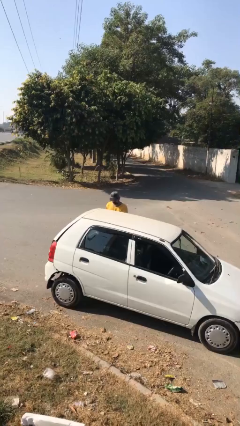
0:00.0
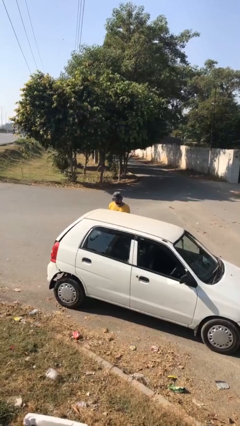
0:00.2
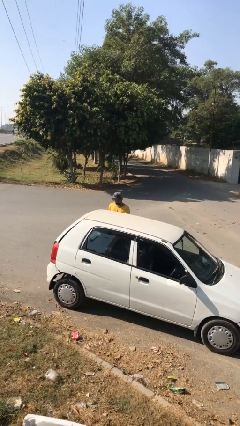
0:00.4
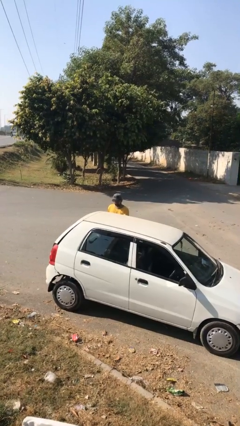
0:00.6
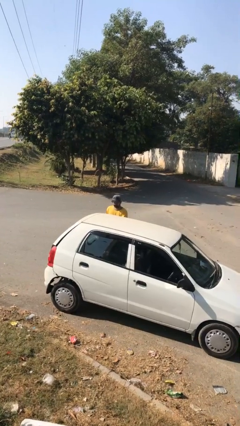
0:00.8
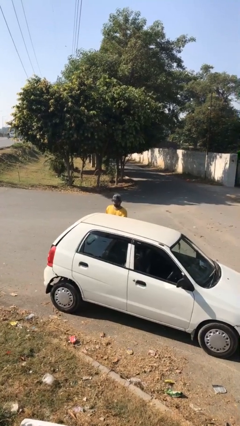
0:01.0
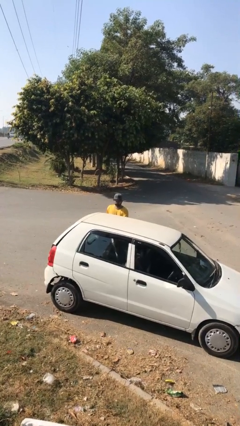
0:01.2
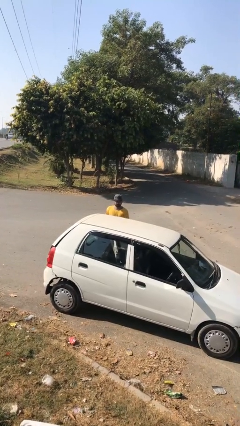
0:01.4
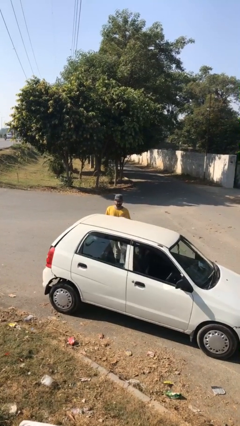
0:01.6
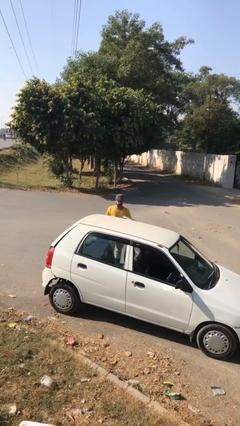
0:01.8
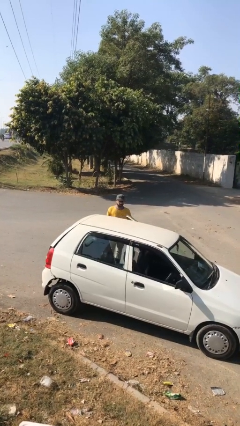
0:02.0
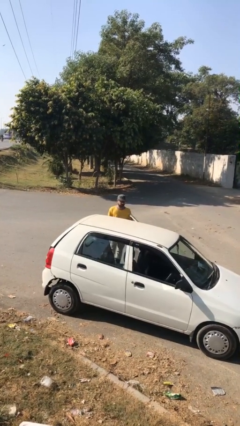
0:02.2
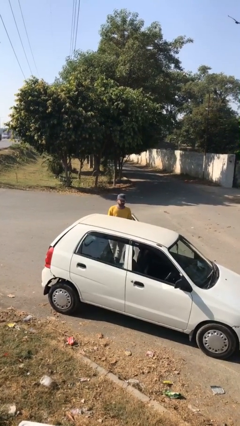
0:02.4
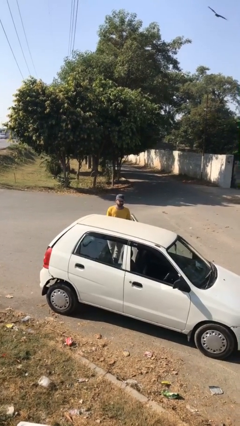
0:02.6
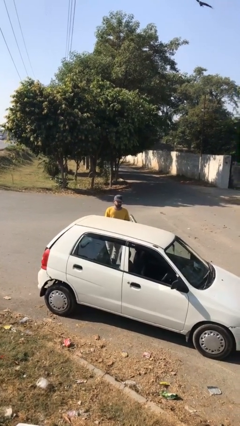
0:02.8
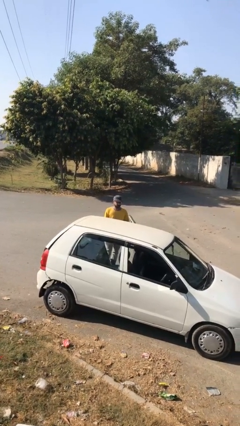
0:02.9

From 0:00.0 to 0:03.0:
person opens car door

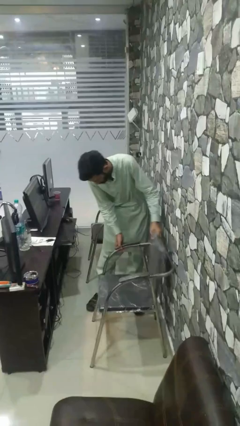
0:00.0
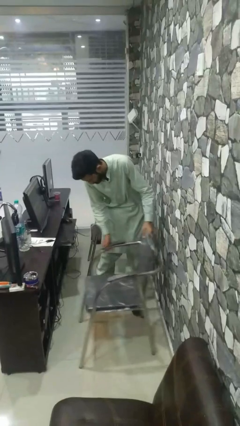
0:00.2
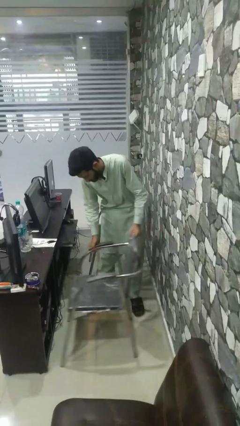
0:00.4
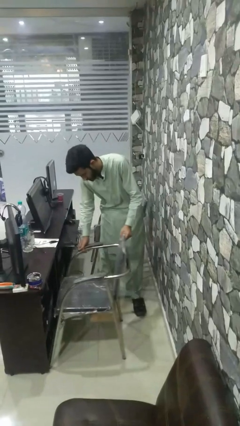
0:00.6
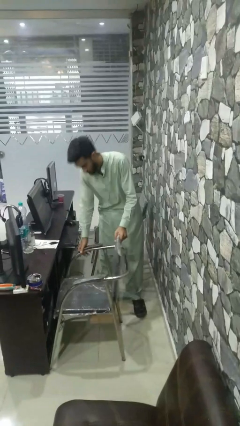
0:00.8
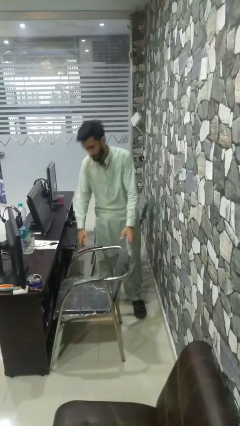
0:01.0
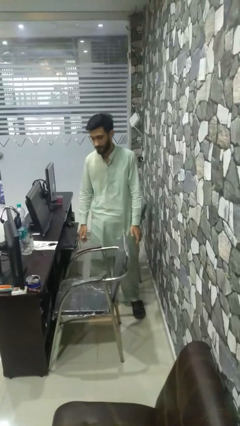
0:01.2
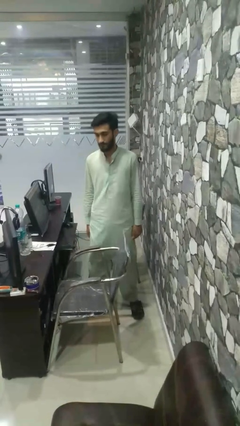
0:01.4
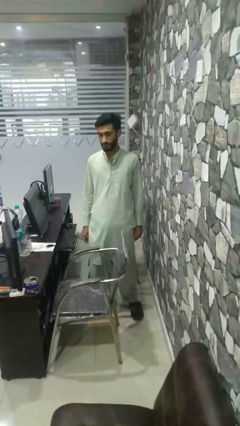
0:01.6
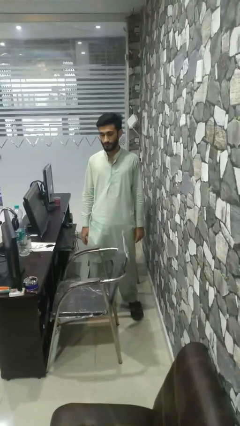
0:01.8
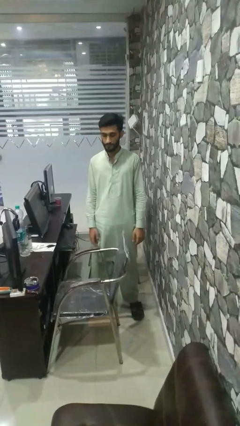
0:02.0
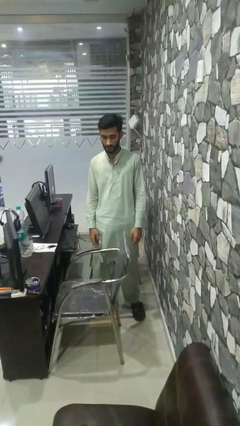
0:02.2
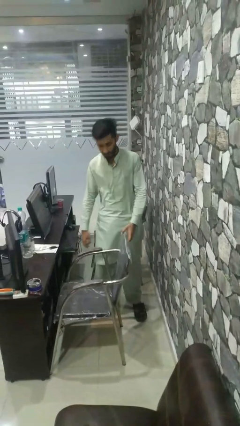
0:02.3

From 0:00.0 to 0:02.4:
person pushes in chair

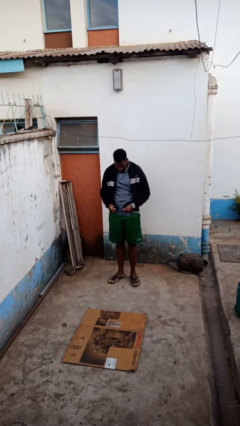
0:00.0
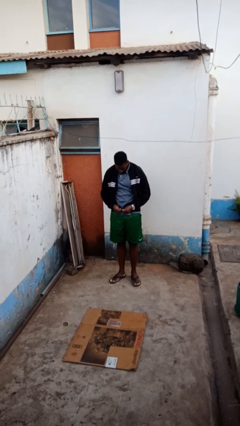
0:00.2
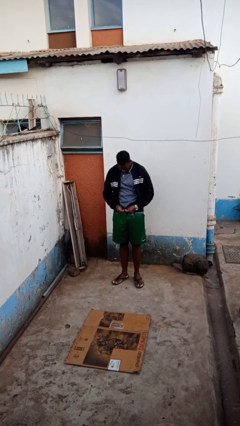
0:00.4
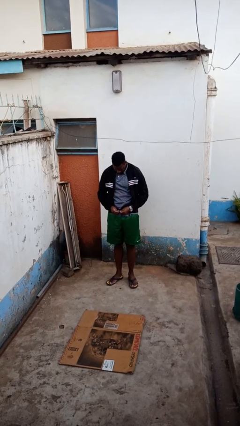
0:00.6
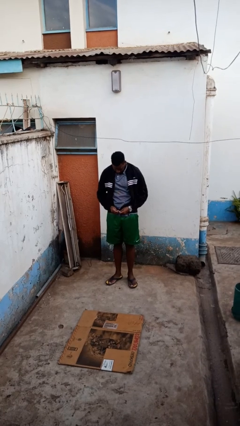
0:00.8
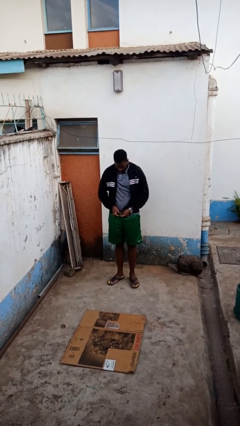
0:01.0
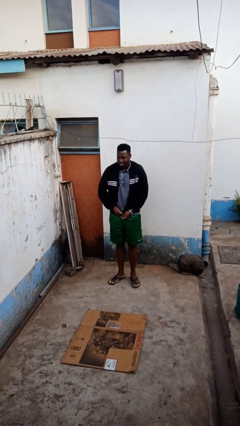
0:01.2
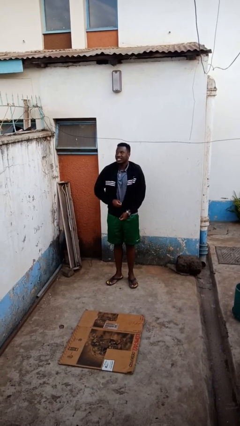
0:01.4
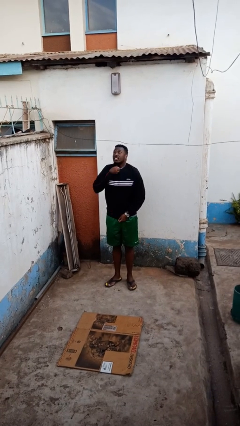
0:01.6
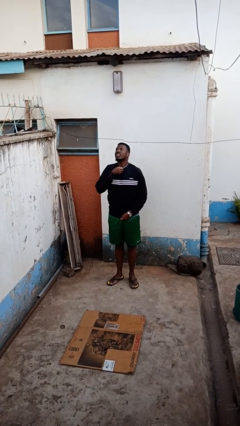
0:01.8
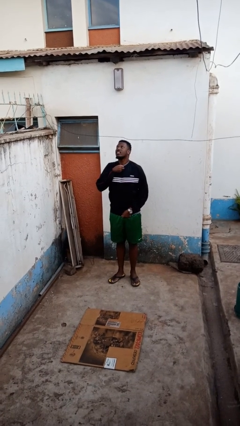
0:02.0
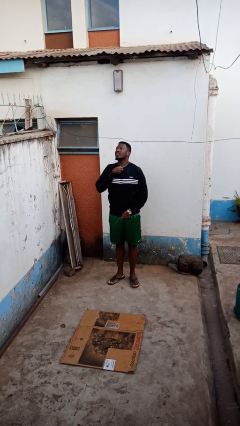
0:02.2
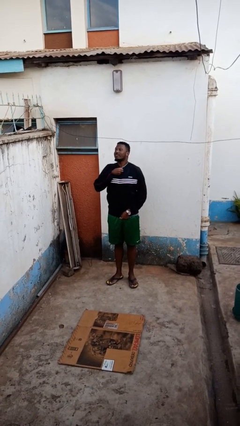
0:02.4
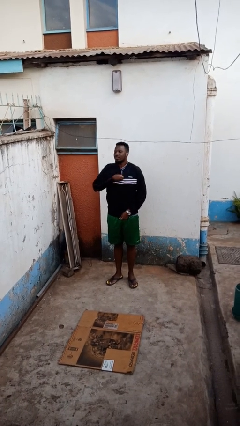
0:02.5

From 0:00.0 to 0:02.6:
person zips up jacket

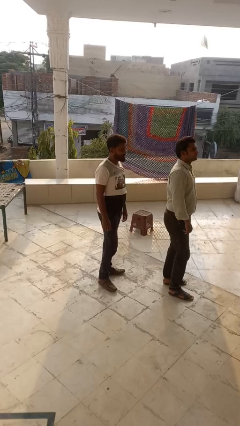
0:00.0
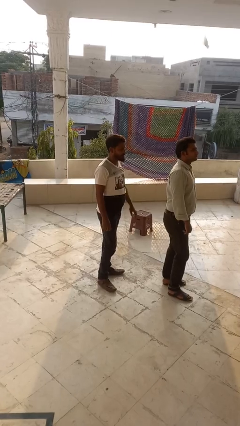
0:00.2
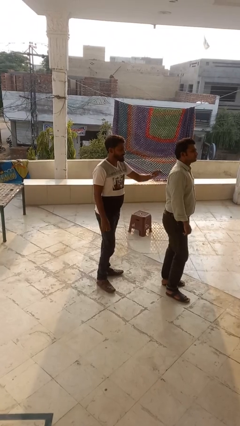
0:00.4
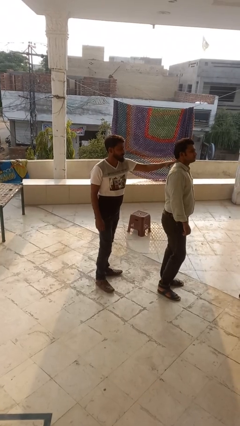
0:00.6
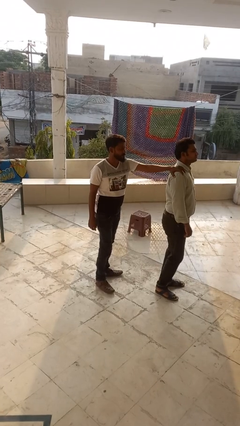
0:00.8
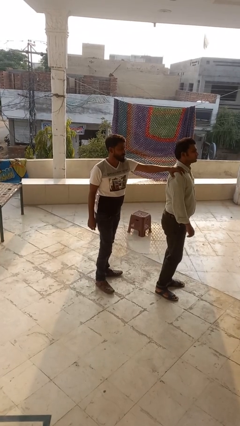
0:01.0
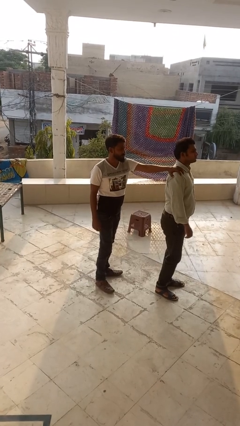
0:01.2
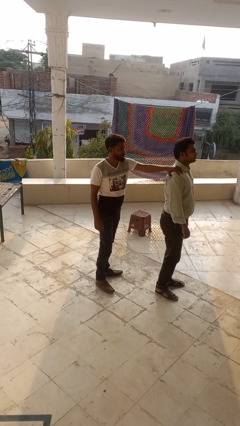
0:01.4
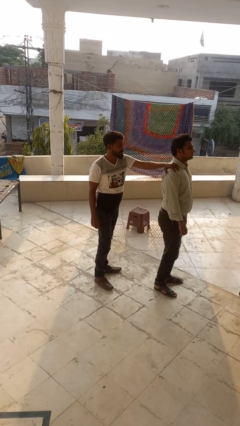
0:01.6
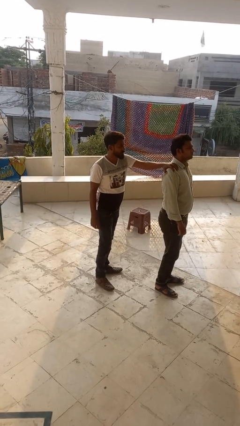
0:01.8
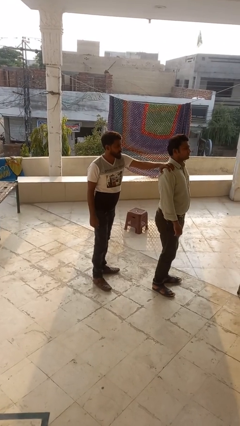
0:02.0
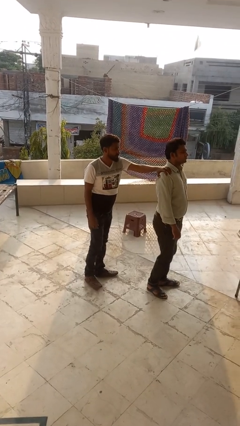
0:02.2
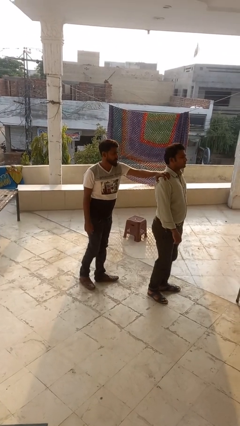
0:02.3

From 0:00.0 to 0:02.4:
person grabs person by shoulder

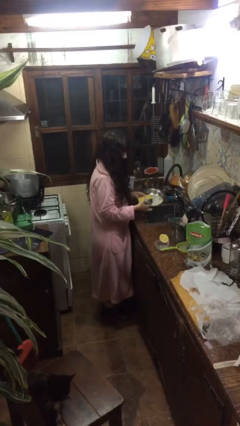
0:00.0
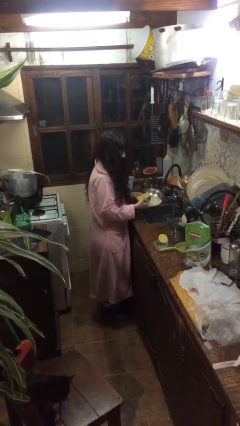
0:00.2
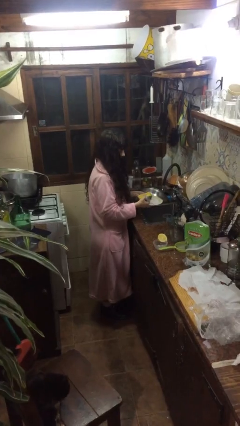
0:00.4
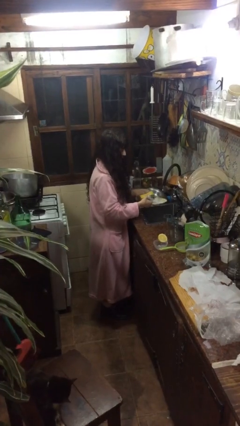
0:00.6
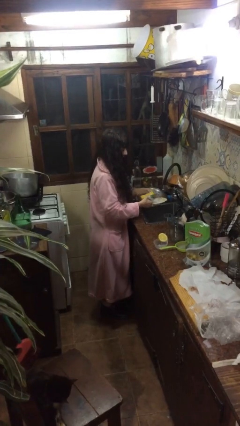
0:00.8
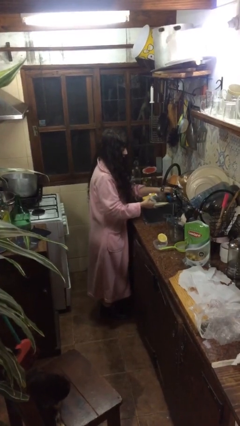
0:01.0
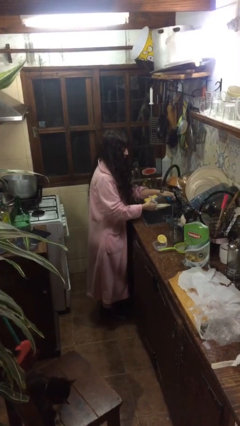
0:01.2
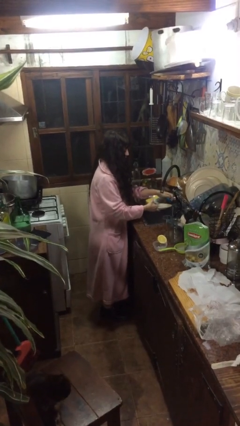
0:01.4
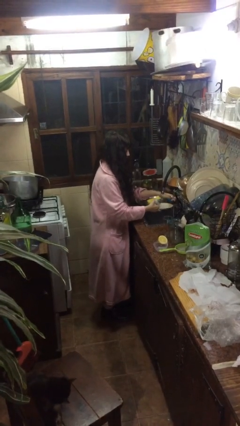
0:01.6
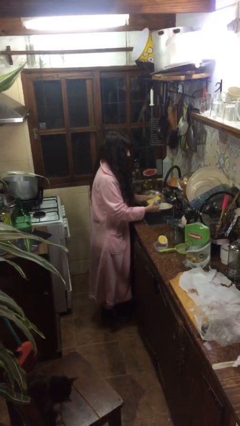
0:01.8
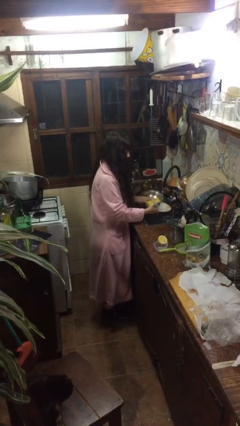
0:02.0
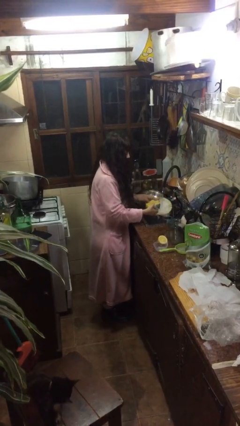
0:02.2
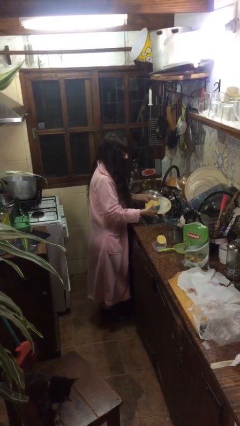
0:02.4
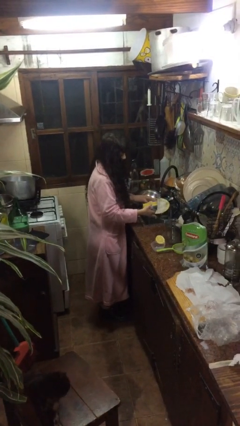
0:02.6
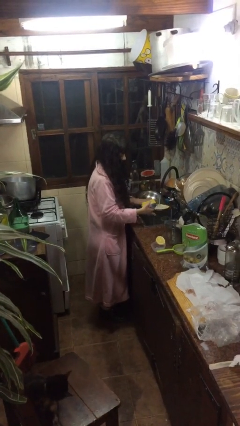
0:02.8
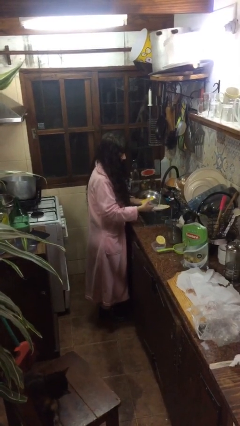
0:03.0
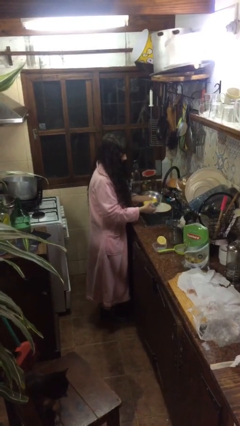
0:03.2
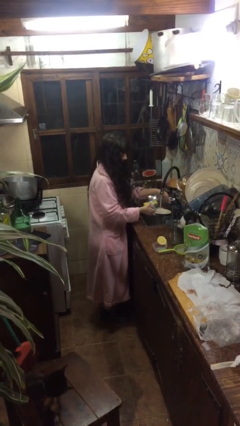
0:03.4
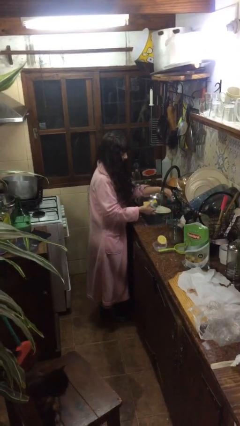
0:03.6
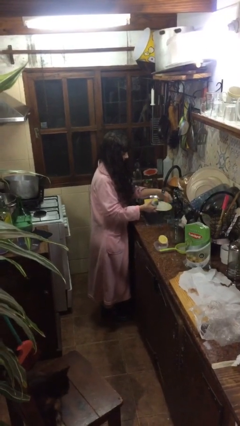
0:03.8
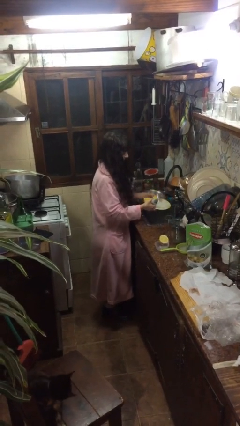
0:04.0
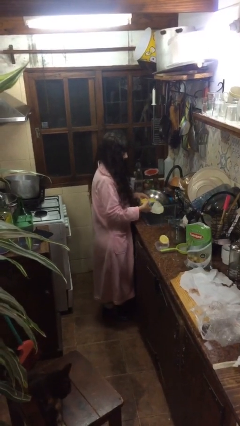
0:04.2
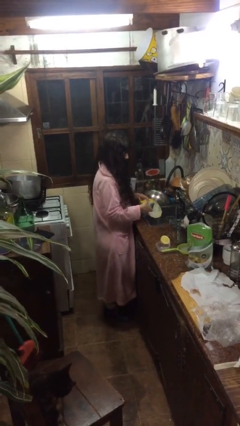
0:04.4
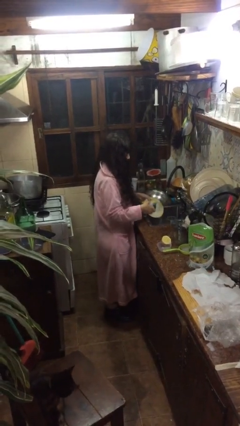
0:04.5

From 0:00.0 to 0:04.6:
person washes dish

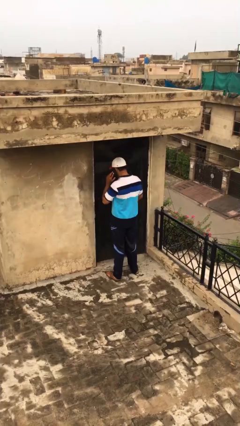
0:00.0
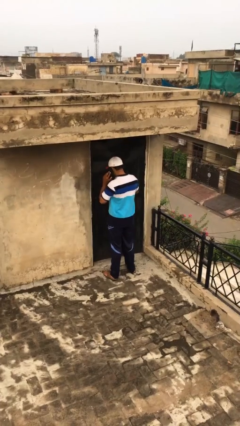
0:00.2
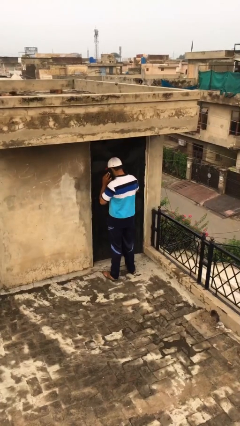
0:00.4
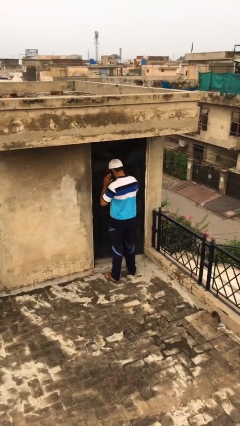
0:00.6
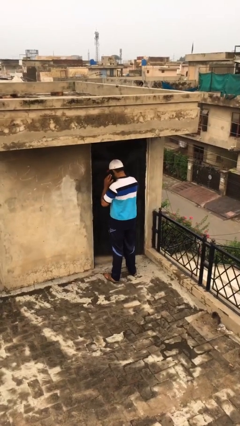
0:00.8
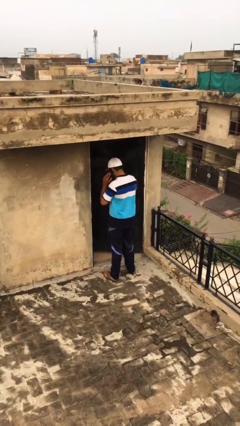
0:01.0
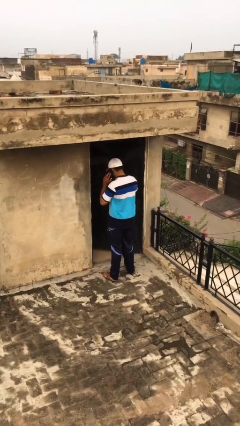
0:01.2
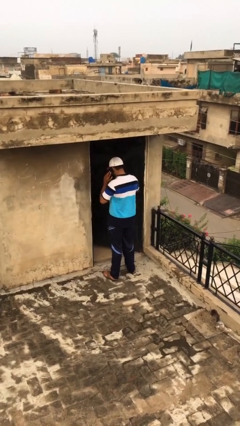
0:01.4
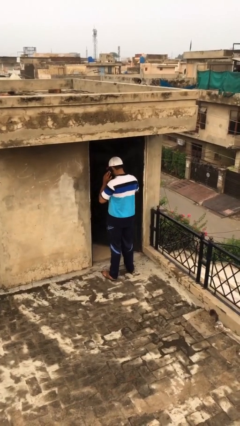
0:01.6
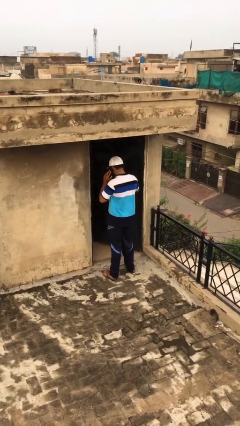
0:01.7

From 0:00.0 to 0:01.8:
person opens facility door

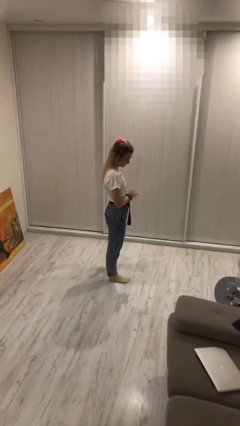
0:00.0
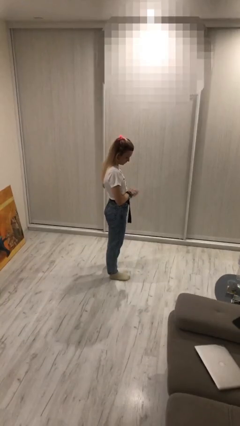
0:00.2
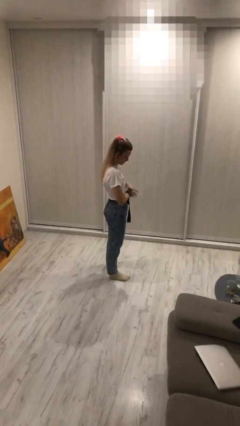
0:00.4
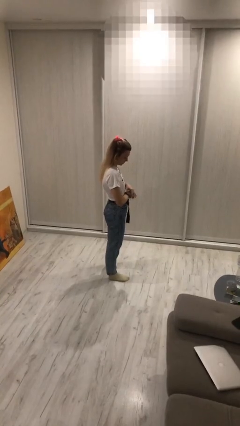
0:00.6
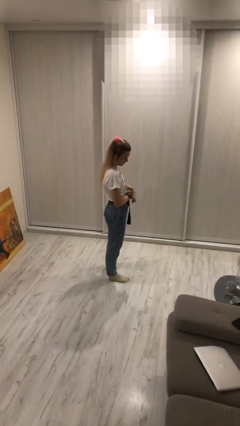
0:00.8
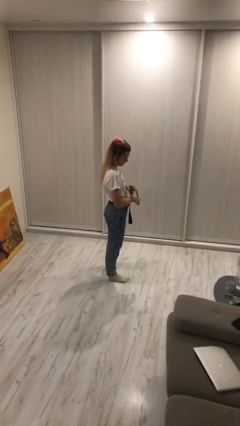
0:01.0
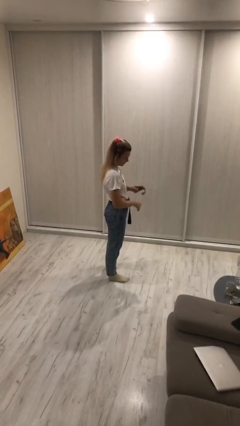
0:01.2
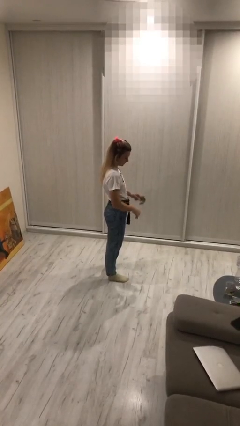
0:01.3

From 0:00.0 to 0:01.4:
person takes off wristwatch
